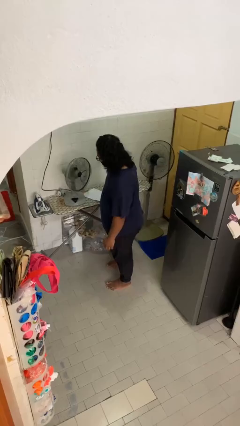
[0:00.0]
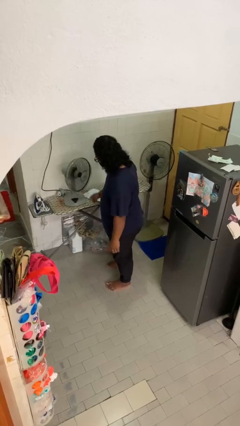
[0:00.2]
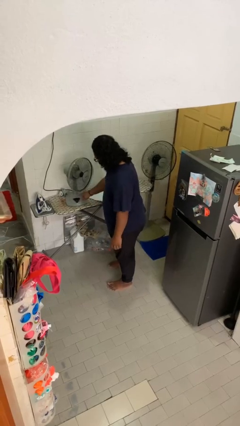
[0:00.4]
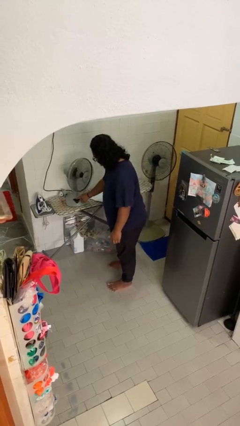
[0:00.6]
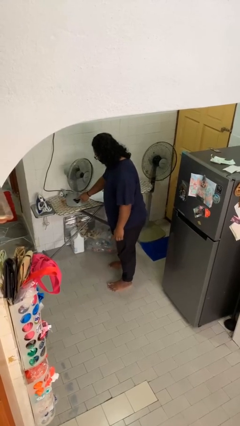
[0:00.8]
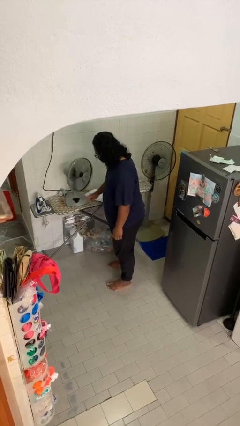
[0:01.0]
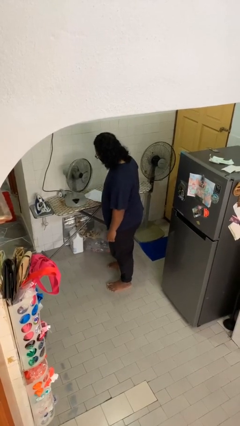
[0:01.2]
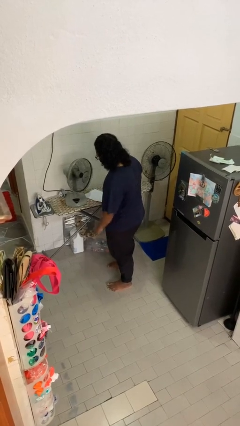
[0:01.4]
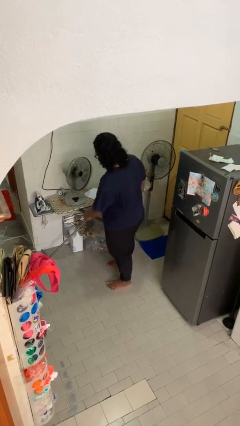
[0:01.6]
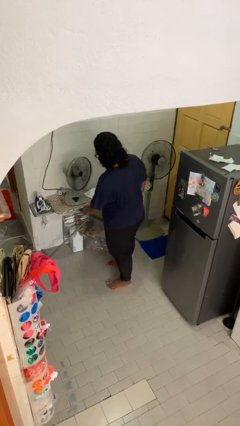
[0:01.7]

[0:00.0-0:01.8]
person turns on fan

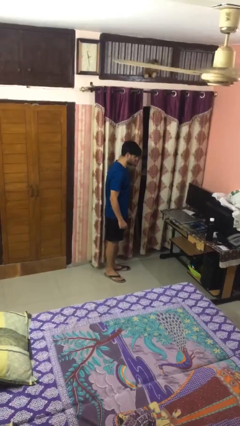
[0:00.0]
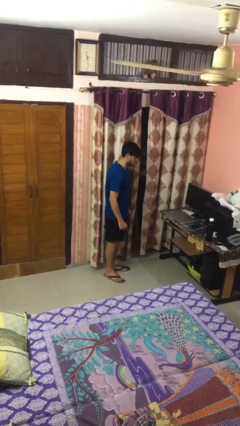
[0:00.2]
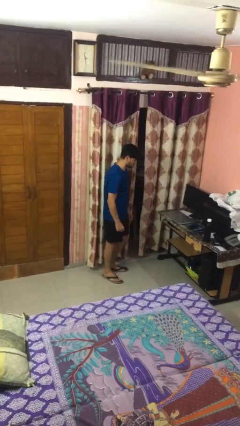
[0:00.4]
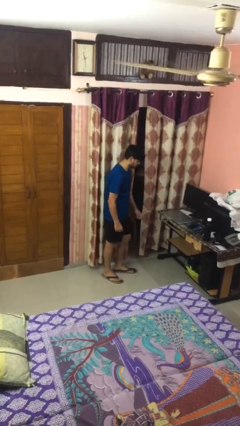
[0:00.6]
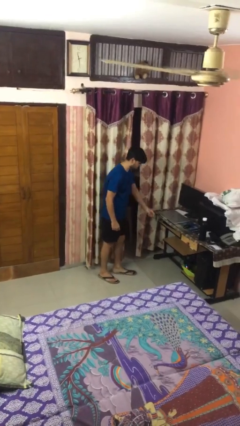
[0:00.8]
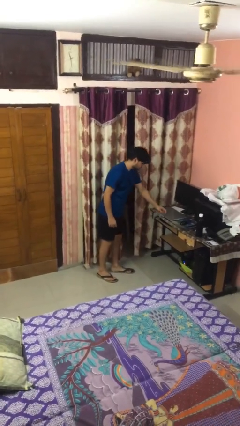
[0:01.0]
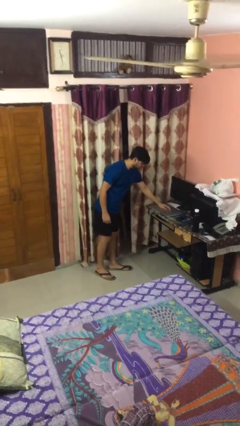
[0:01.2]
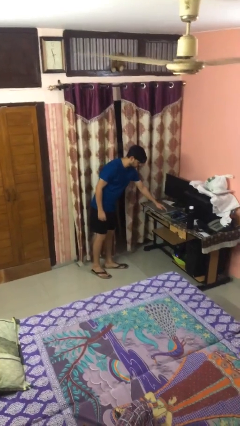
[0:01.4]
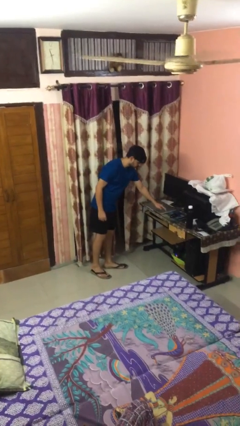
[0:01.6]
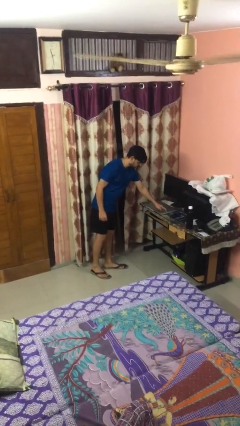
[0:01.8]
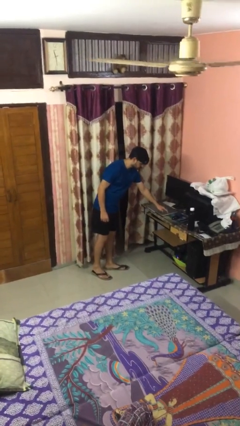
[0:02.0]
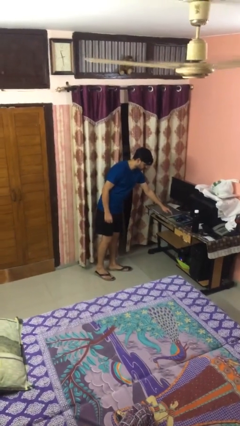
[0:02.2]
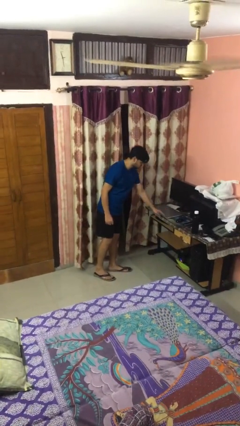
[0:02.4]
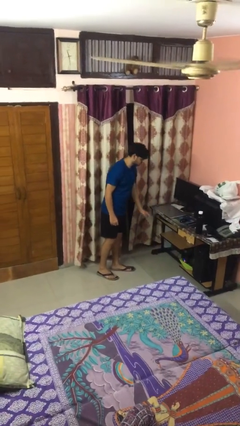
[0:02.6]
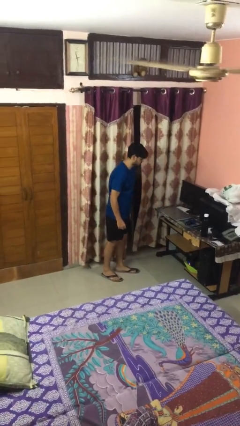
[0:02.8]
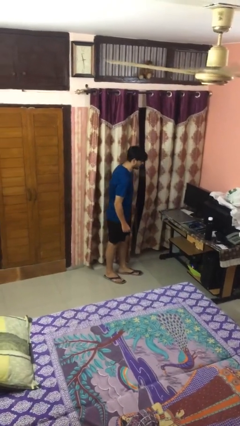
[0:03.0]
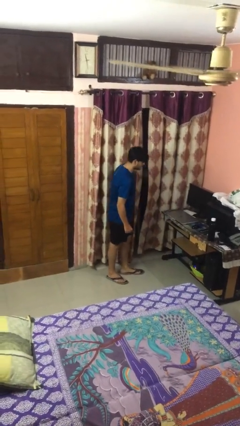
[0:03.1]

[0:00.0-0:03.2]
person taps object with finger

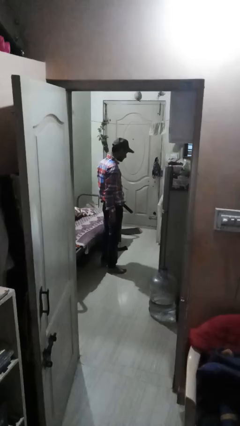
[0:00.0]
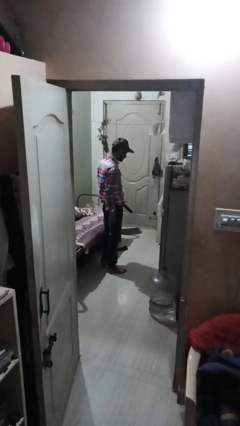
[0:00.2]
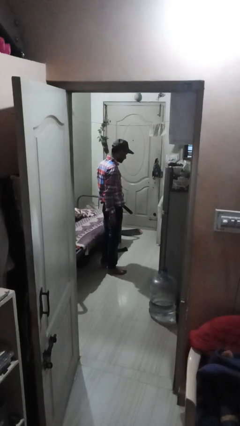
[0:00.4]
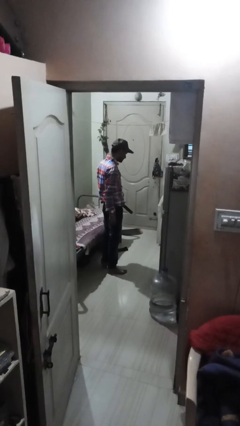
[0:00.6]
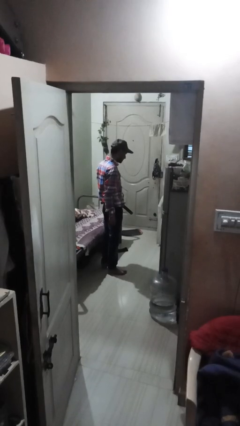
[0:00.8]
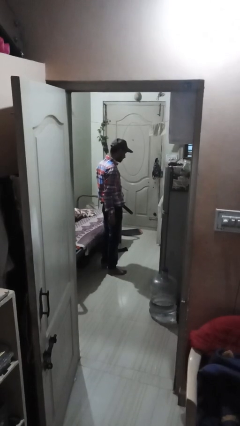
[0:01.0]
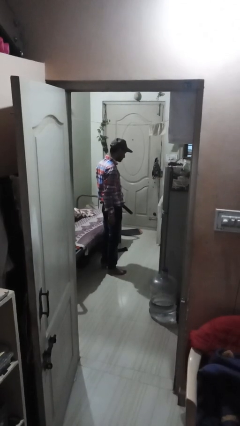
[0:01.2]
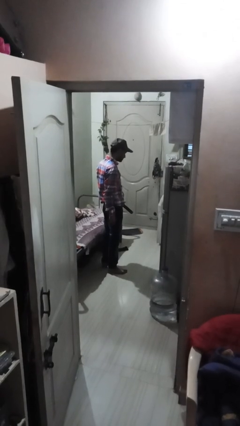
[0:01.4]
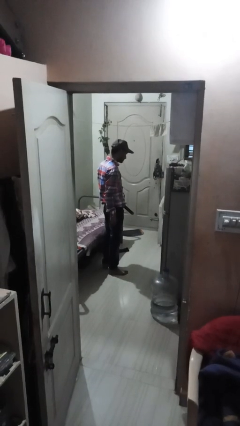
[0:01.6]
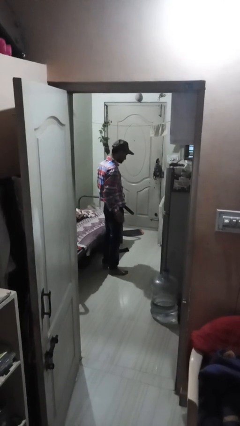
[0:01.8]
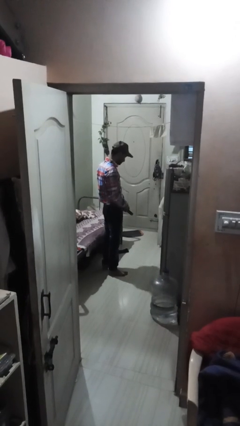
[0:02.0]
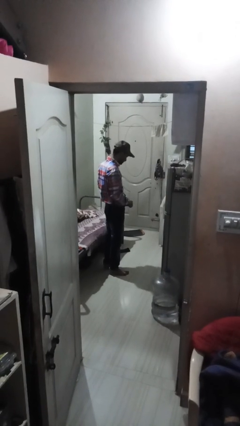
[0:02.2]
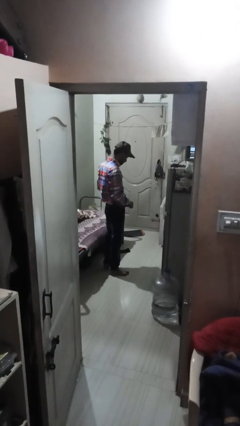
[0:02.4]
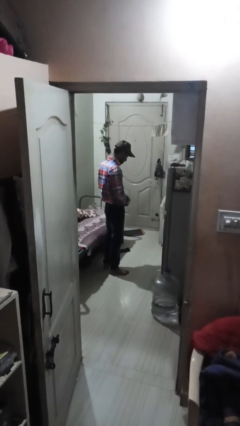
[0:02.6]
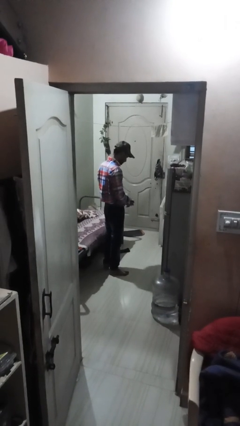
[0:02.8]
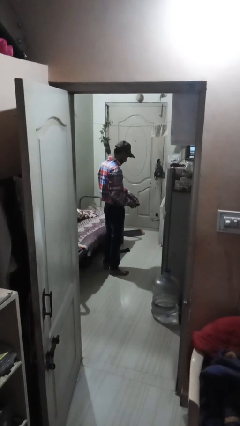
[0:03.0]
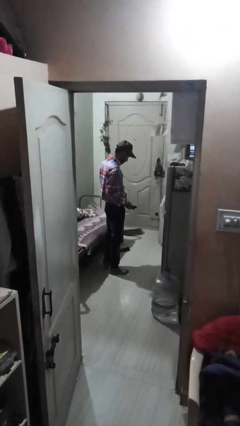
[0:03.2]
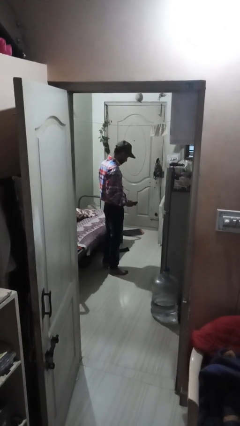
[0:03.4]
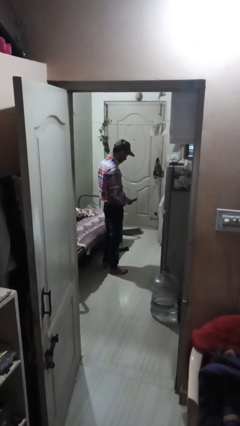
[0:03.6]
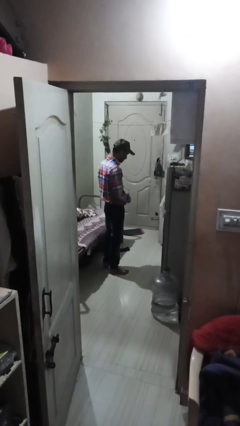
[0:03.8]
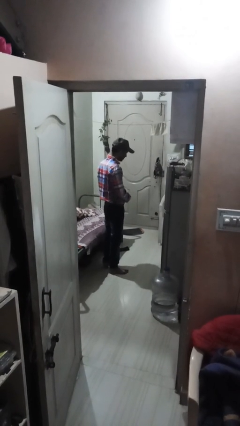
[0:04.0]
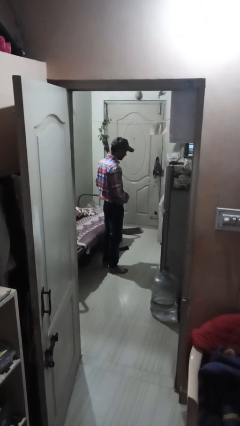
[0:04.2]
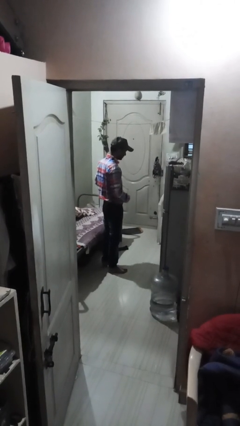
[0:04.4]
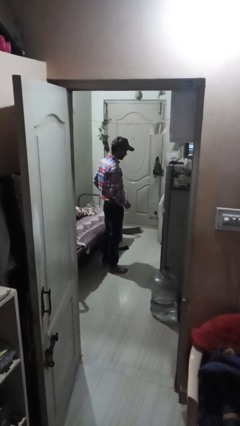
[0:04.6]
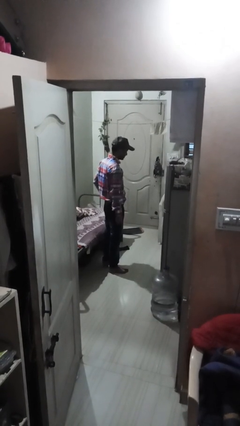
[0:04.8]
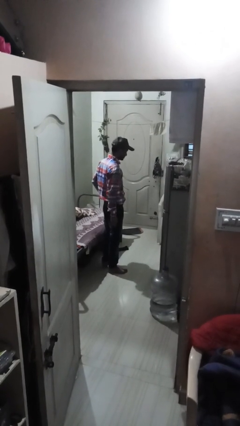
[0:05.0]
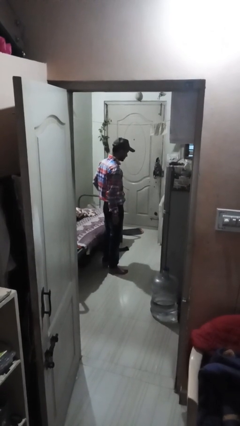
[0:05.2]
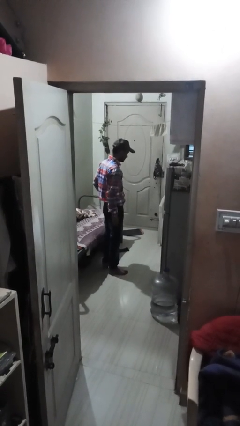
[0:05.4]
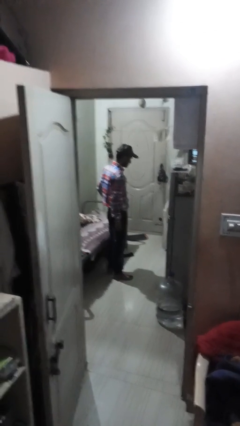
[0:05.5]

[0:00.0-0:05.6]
person puts on belt

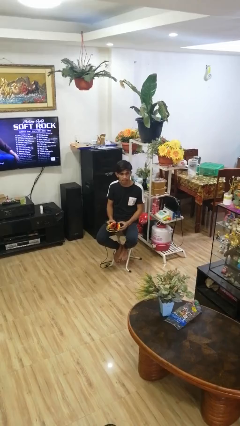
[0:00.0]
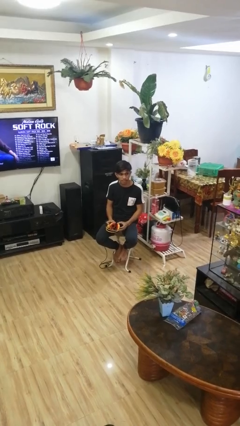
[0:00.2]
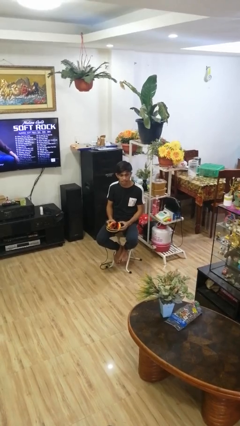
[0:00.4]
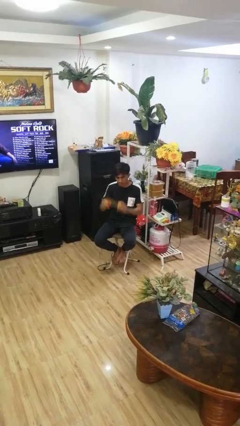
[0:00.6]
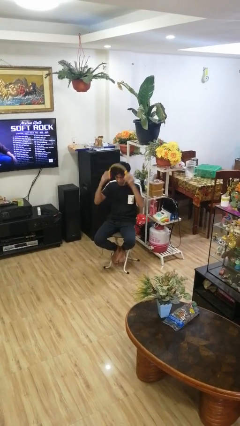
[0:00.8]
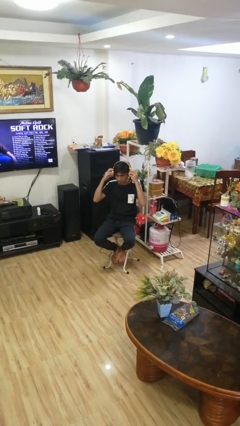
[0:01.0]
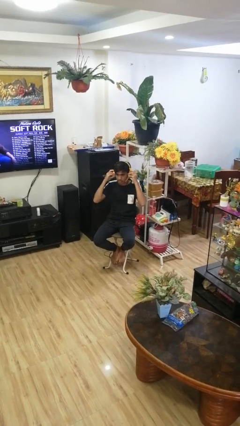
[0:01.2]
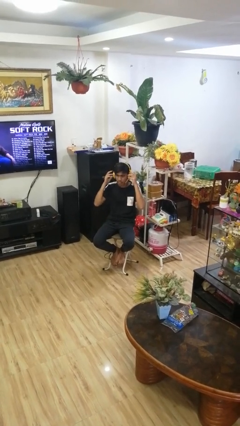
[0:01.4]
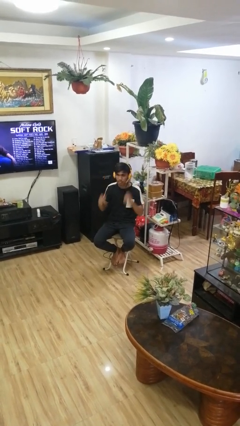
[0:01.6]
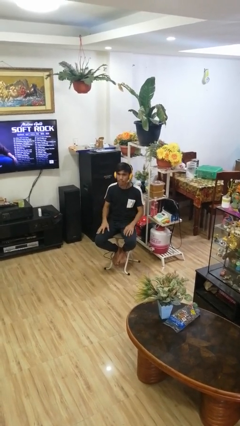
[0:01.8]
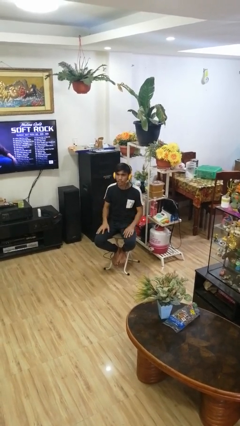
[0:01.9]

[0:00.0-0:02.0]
person puts on headphones

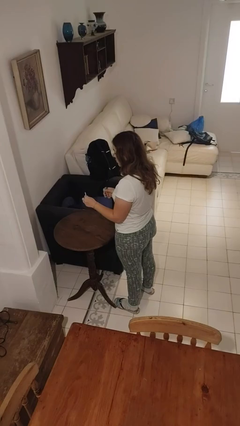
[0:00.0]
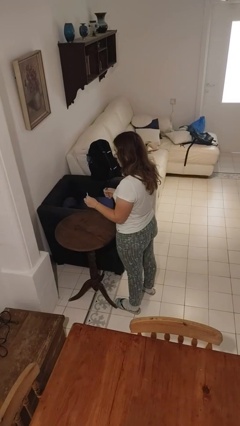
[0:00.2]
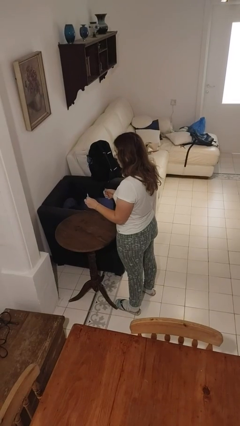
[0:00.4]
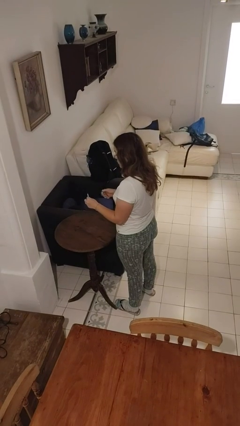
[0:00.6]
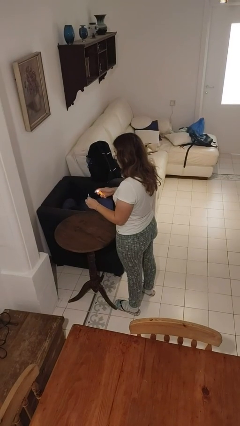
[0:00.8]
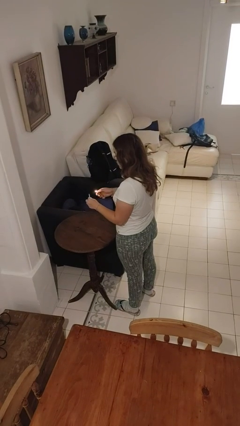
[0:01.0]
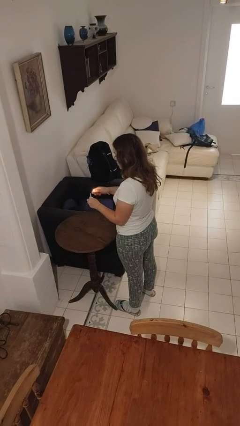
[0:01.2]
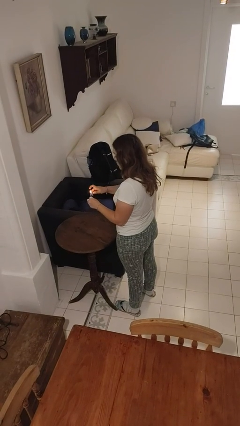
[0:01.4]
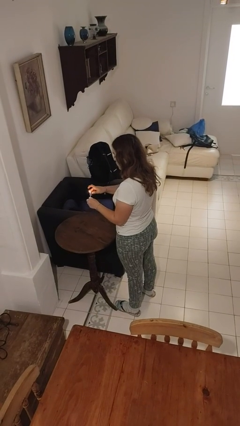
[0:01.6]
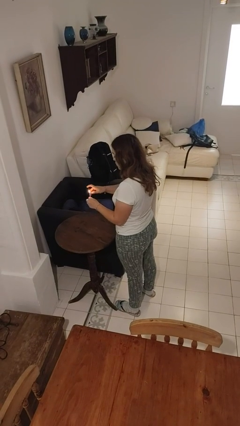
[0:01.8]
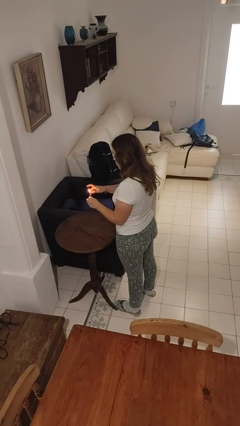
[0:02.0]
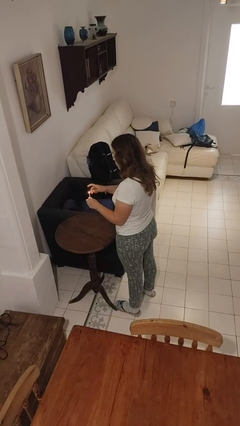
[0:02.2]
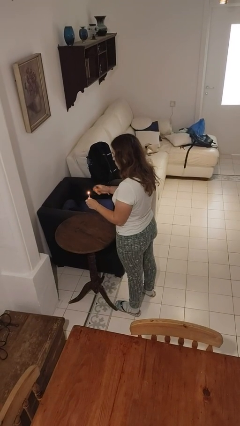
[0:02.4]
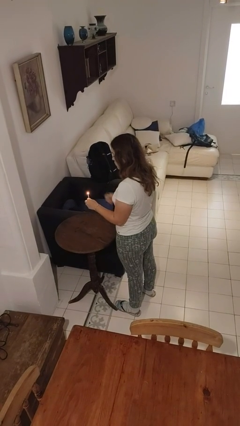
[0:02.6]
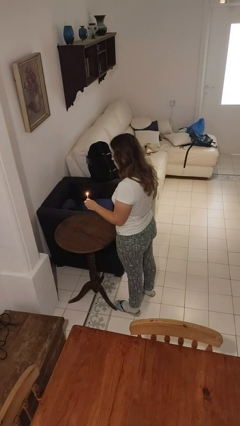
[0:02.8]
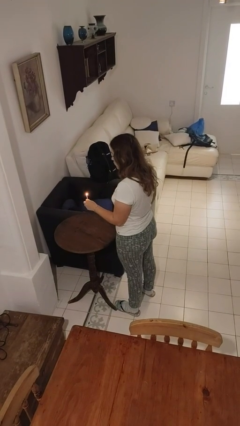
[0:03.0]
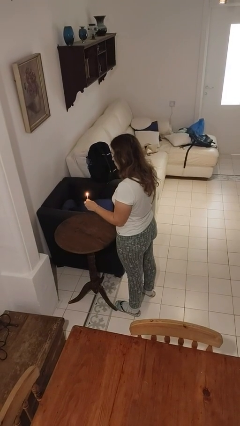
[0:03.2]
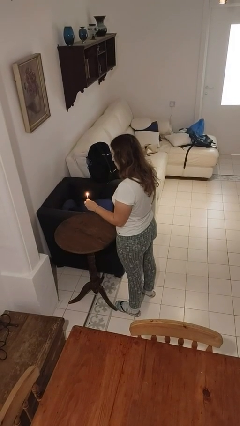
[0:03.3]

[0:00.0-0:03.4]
person lights candle

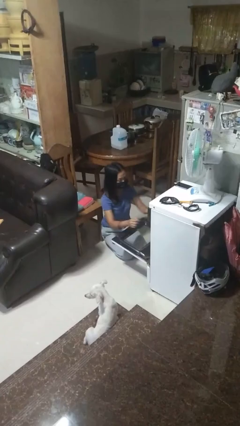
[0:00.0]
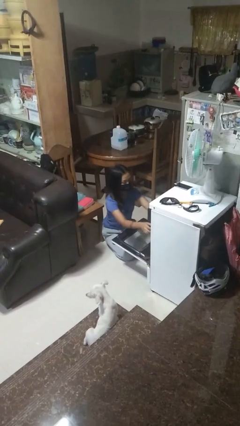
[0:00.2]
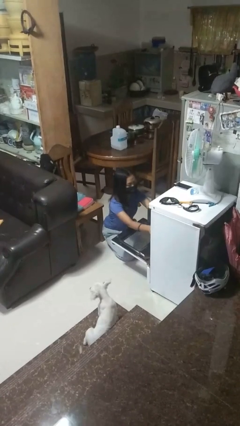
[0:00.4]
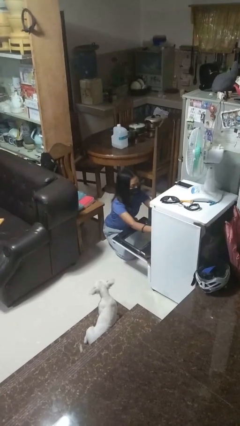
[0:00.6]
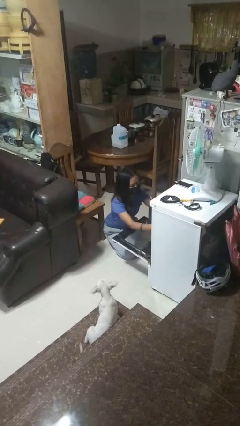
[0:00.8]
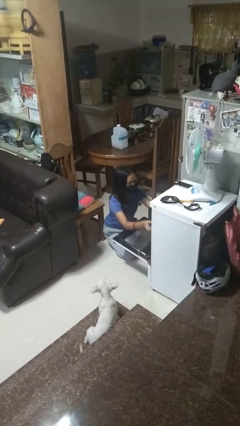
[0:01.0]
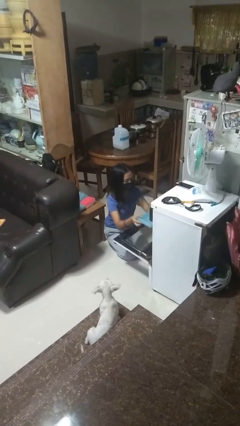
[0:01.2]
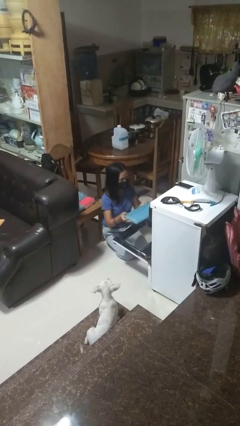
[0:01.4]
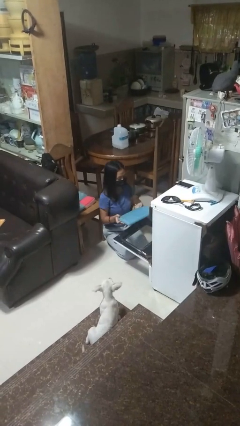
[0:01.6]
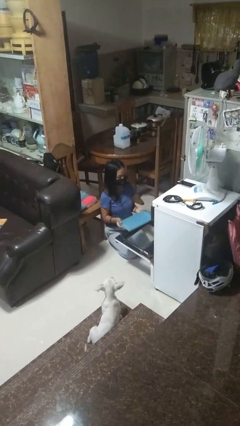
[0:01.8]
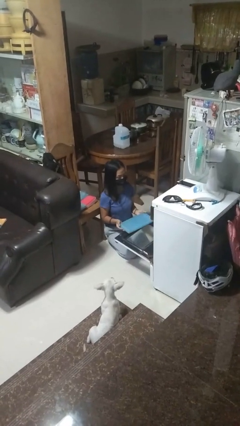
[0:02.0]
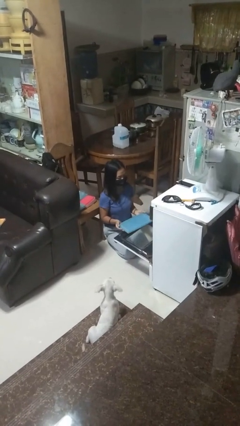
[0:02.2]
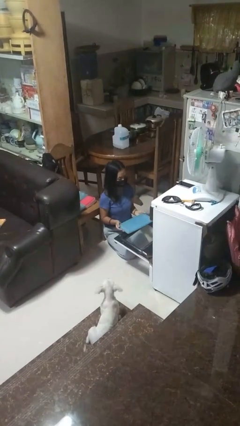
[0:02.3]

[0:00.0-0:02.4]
person takes object from oven
